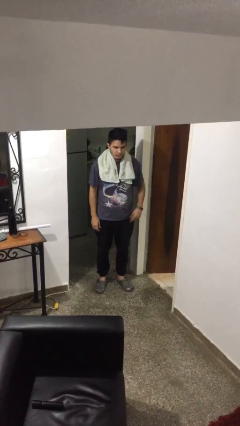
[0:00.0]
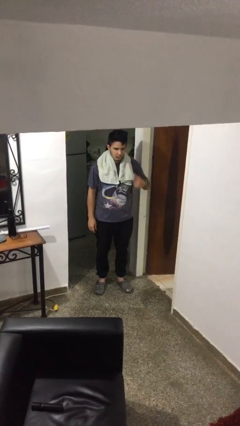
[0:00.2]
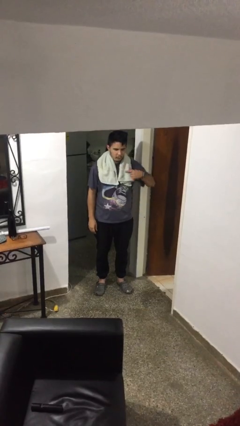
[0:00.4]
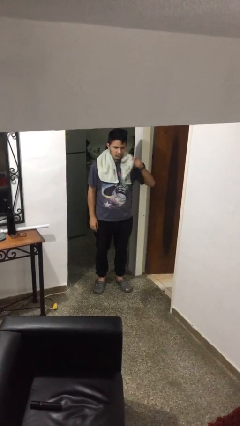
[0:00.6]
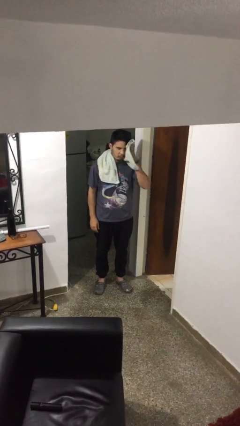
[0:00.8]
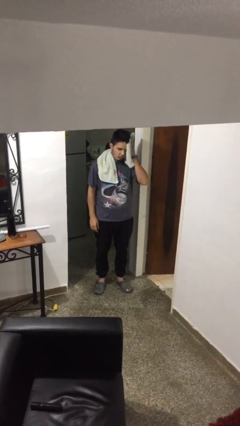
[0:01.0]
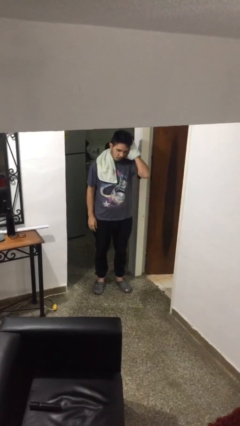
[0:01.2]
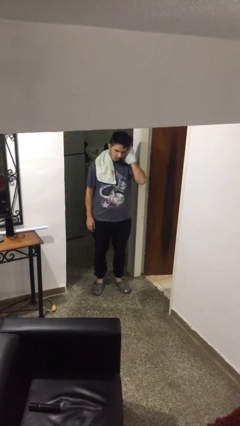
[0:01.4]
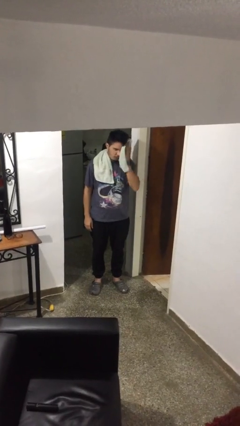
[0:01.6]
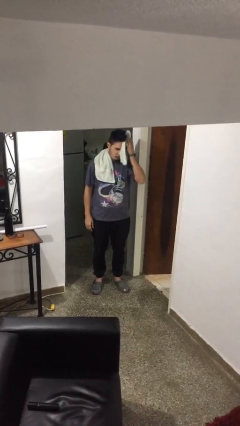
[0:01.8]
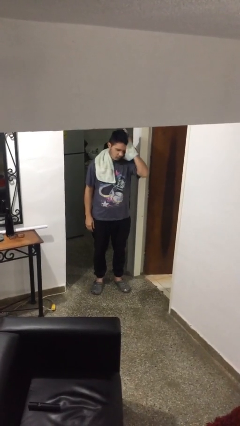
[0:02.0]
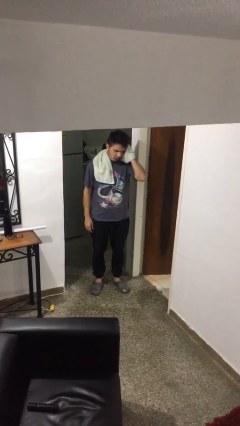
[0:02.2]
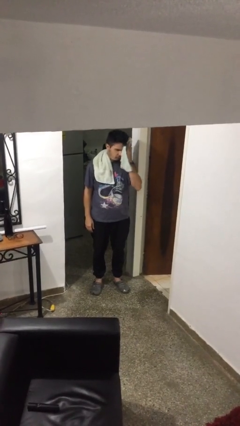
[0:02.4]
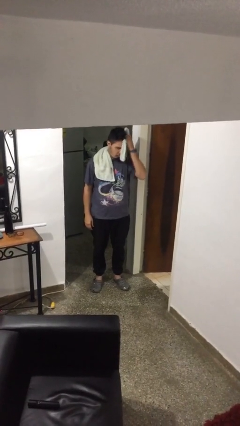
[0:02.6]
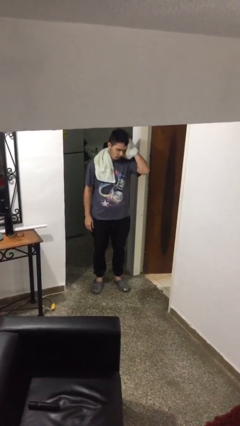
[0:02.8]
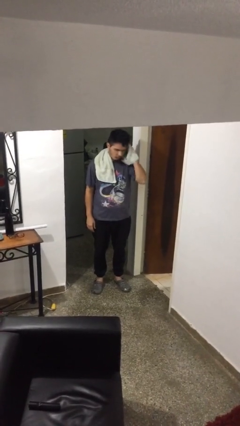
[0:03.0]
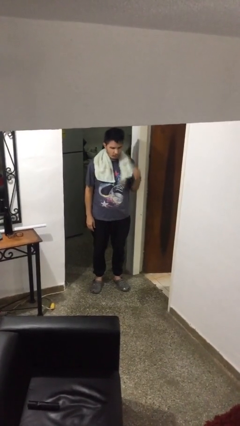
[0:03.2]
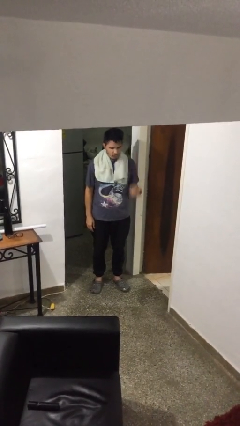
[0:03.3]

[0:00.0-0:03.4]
person dries hair with towel

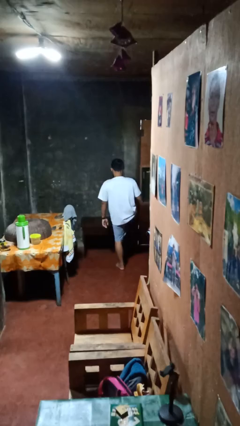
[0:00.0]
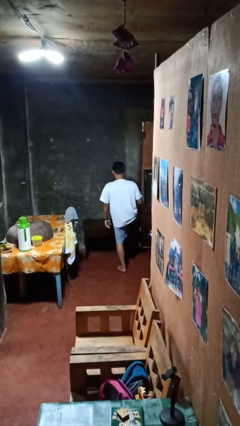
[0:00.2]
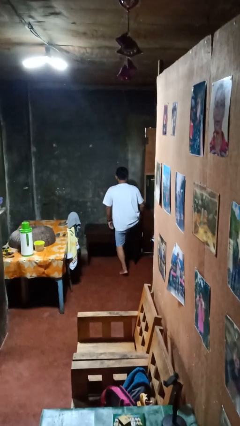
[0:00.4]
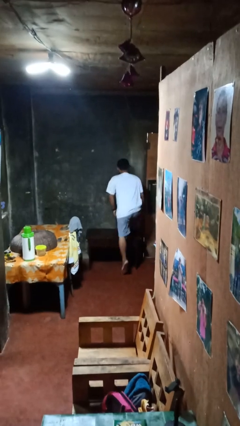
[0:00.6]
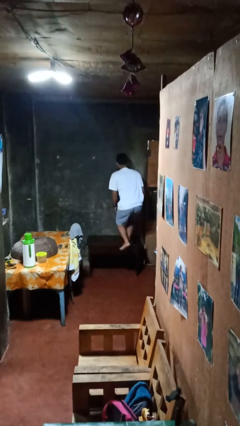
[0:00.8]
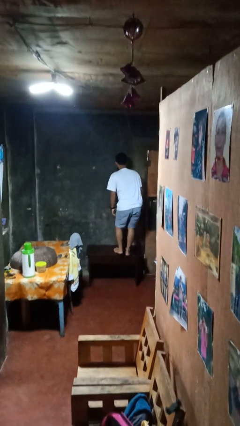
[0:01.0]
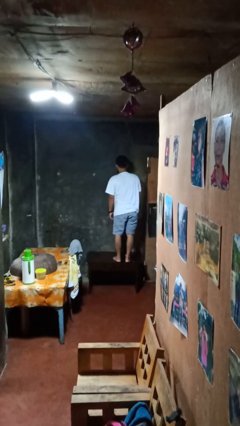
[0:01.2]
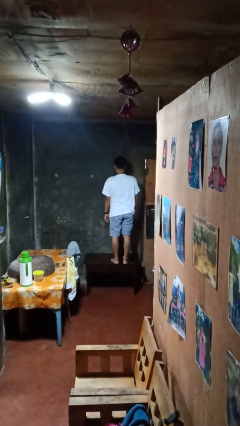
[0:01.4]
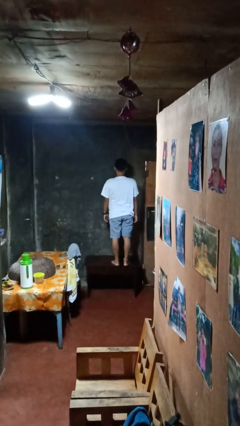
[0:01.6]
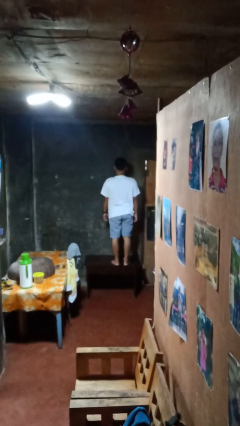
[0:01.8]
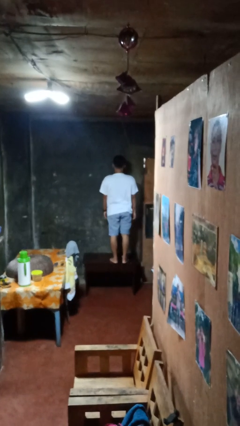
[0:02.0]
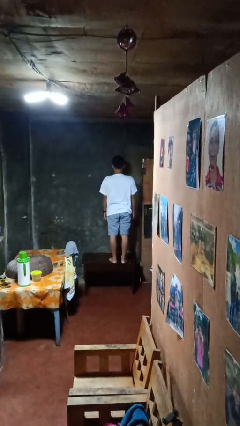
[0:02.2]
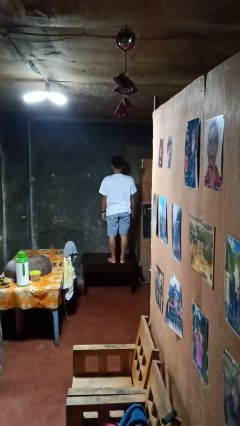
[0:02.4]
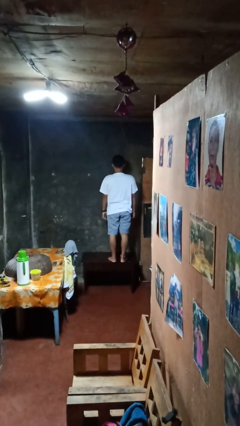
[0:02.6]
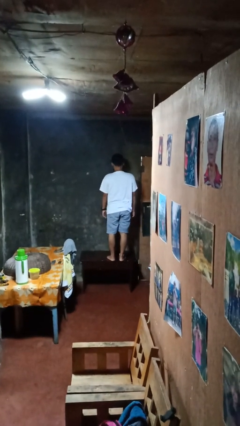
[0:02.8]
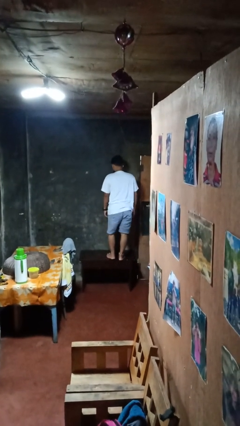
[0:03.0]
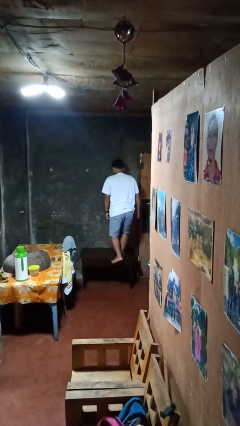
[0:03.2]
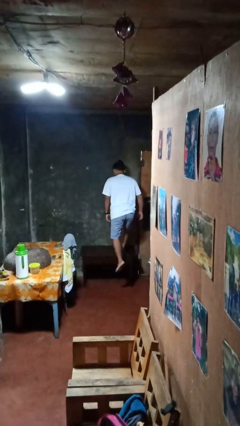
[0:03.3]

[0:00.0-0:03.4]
person climbs on table

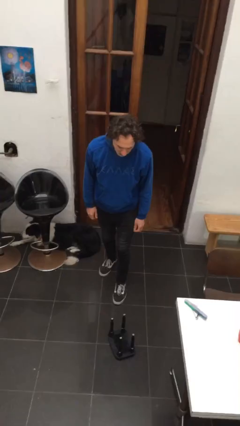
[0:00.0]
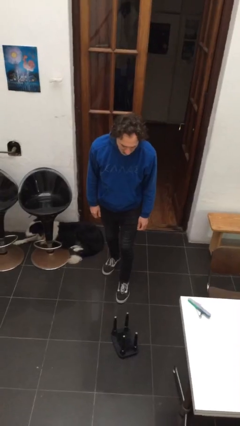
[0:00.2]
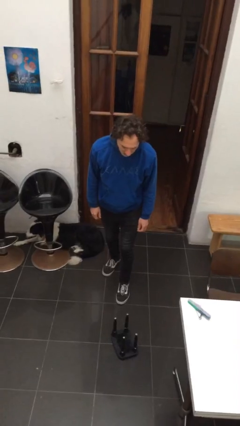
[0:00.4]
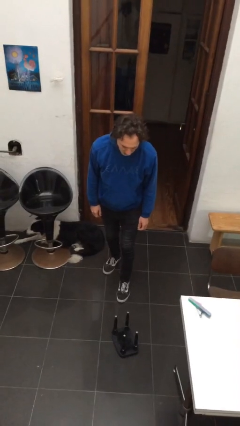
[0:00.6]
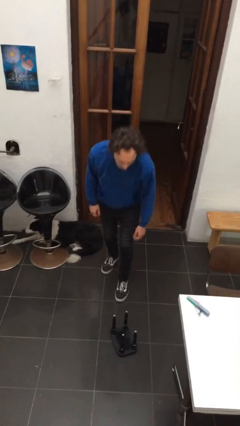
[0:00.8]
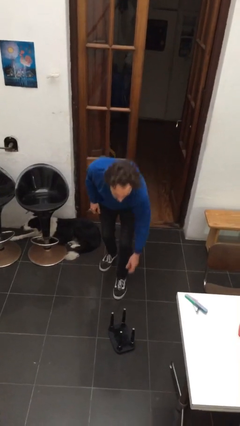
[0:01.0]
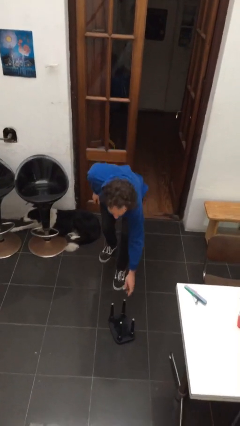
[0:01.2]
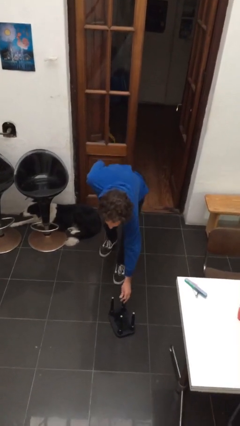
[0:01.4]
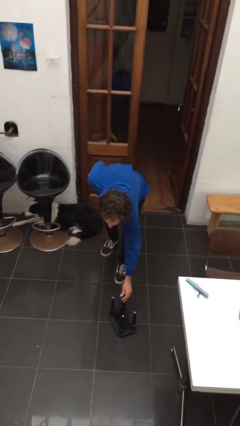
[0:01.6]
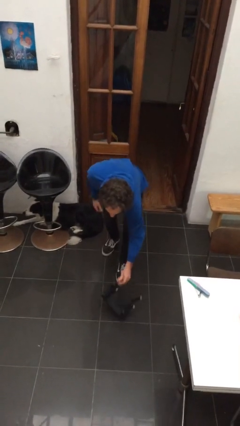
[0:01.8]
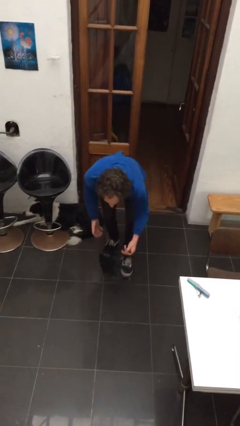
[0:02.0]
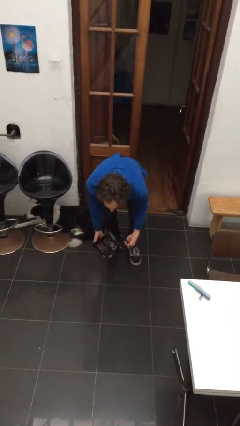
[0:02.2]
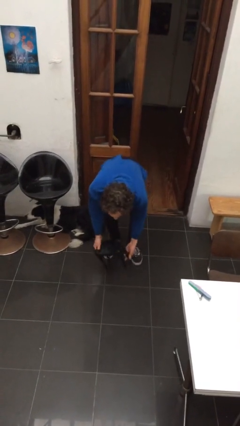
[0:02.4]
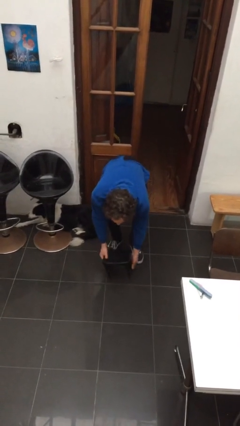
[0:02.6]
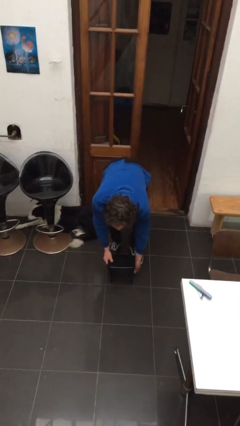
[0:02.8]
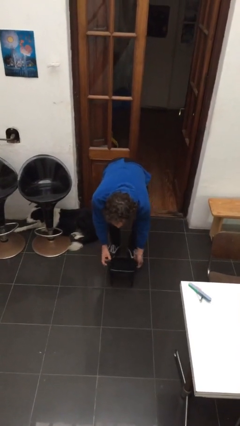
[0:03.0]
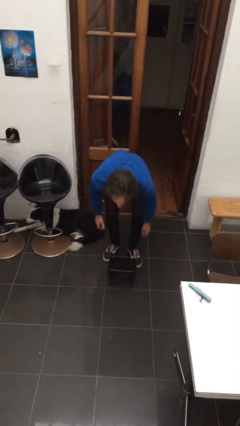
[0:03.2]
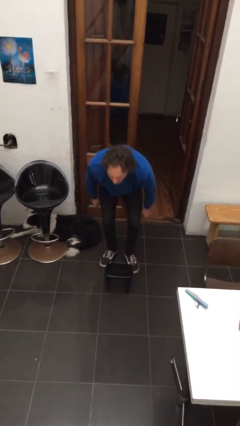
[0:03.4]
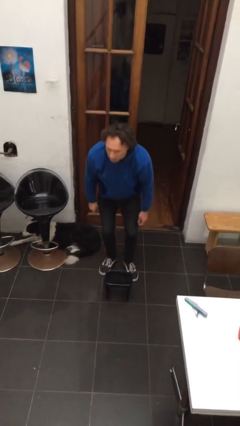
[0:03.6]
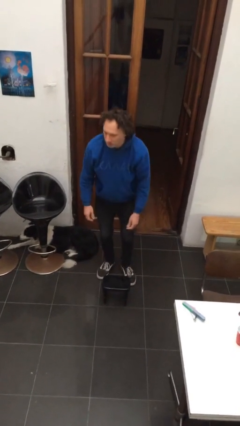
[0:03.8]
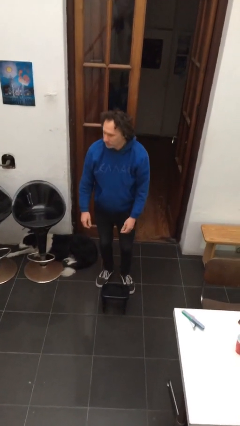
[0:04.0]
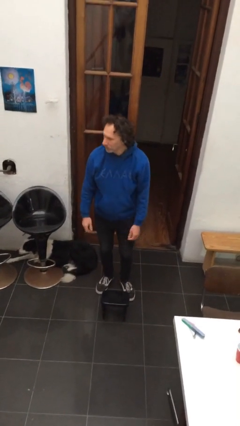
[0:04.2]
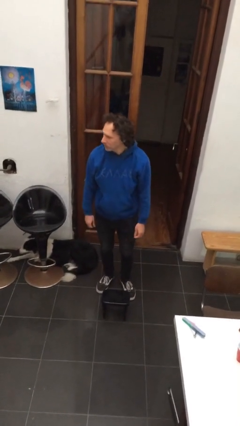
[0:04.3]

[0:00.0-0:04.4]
person sets upright furniture

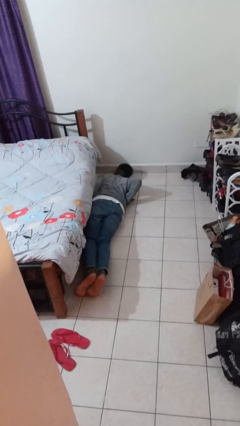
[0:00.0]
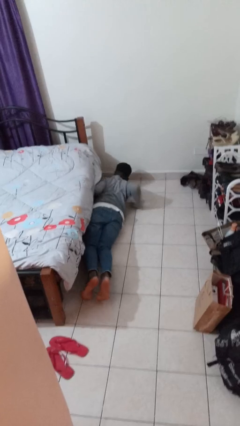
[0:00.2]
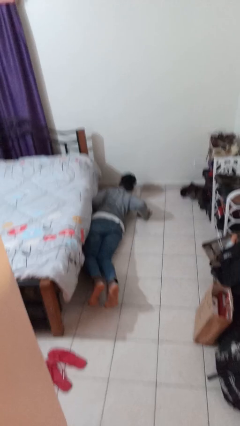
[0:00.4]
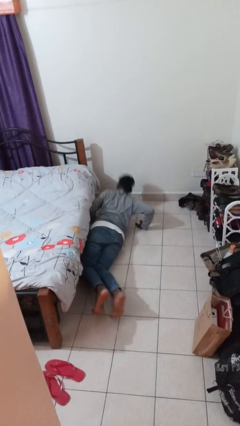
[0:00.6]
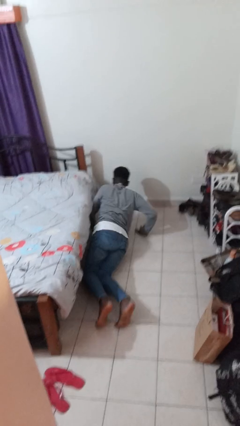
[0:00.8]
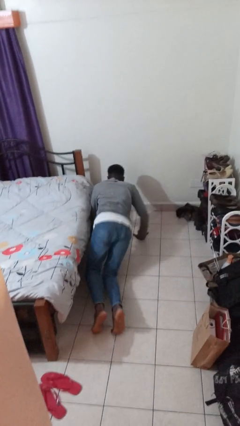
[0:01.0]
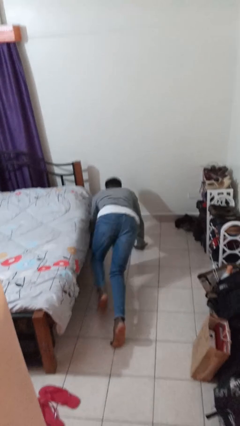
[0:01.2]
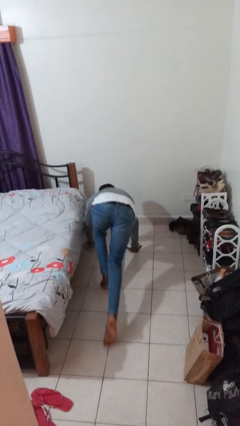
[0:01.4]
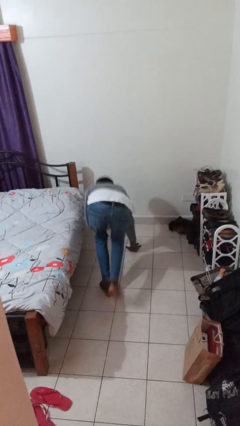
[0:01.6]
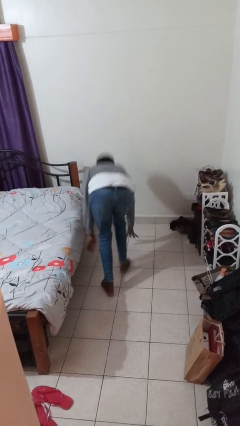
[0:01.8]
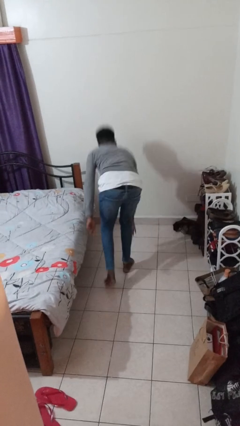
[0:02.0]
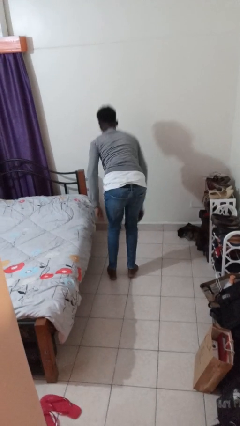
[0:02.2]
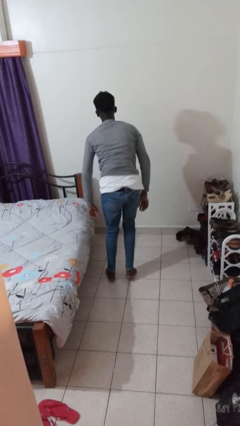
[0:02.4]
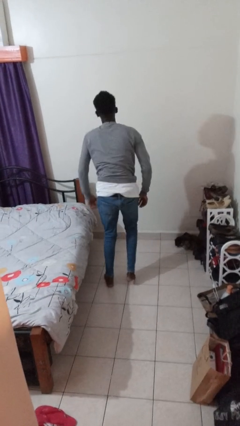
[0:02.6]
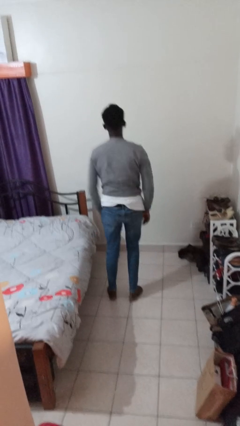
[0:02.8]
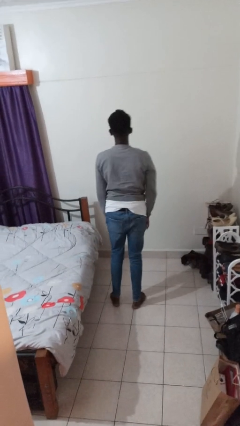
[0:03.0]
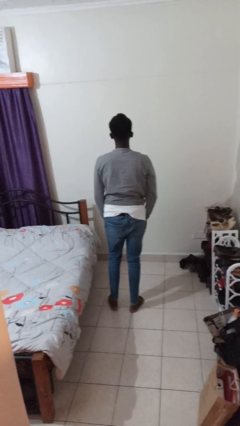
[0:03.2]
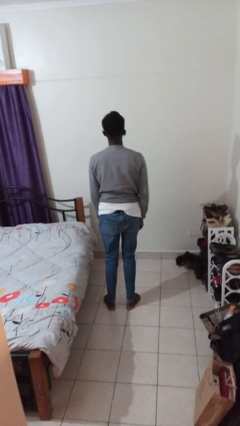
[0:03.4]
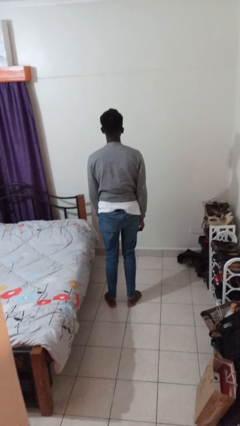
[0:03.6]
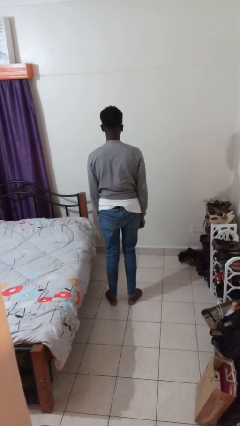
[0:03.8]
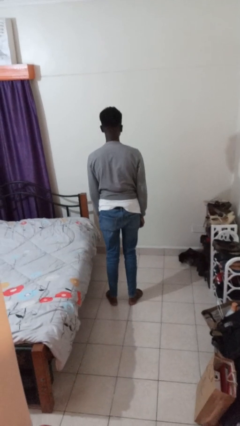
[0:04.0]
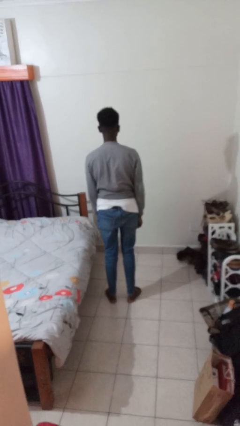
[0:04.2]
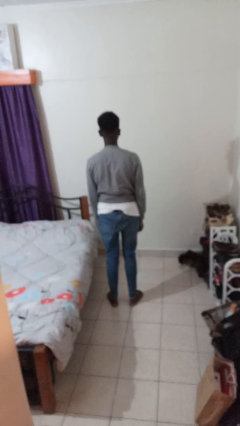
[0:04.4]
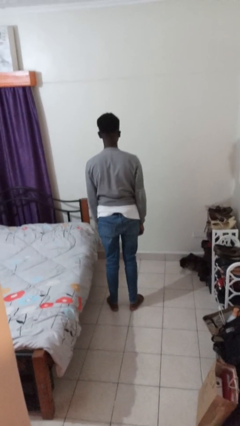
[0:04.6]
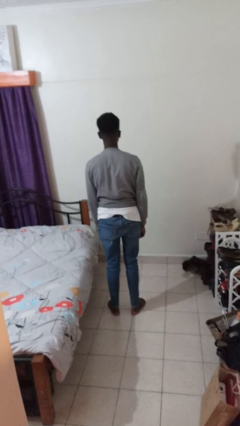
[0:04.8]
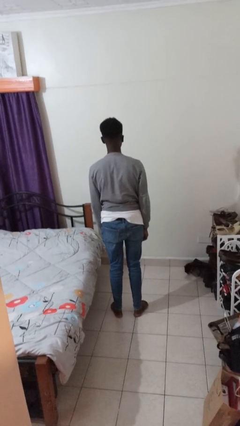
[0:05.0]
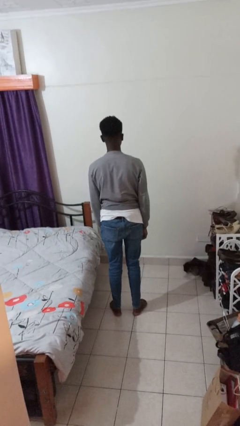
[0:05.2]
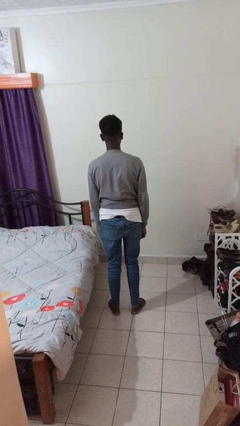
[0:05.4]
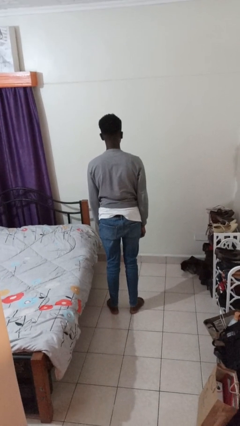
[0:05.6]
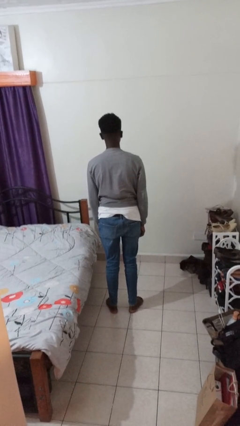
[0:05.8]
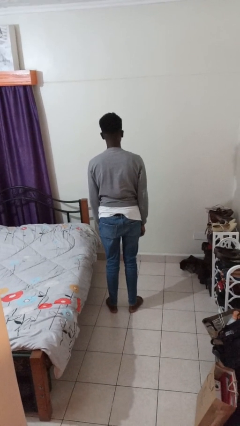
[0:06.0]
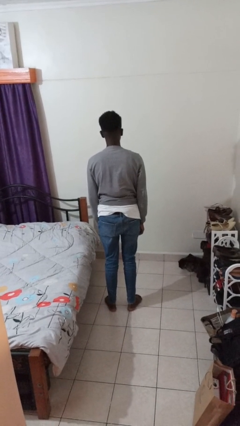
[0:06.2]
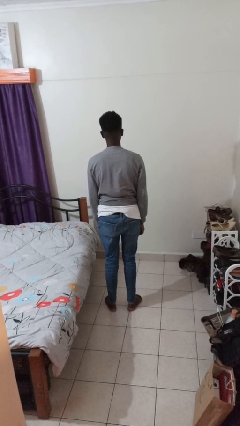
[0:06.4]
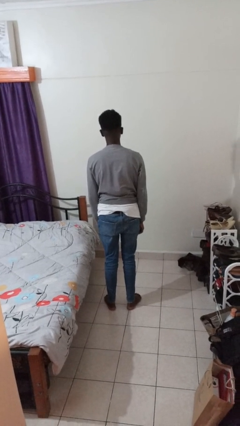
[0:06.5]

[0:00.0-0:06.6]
person stands up from floor

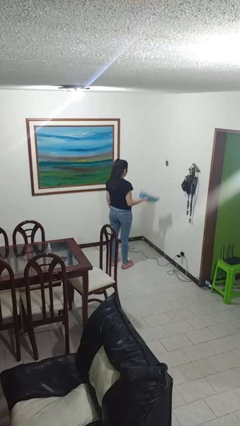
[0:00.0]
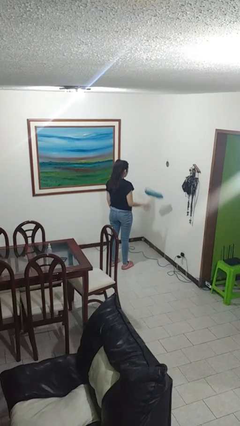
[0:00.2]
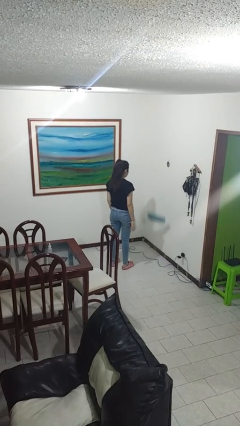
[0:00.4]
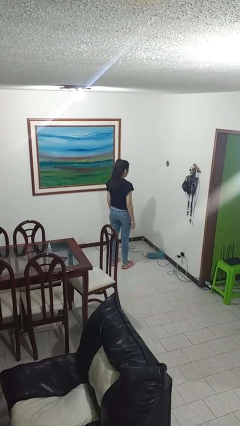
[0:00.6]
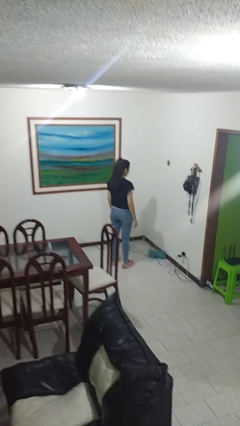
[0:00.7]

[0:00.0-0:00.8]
person throws object into air
